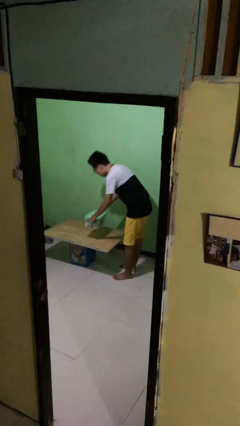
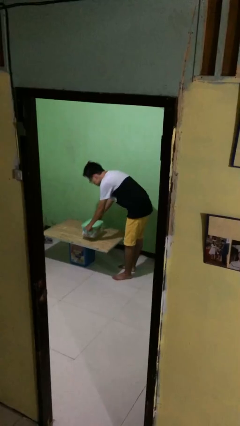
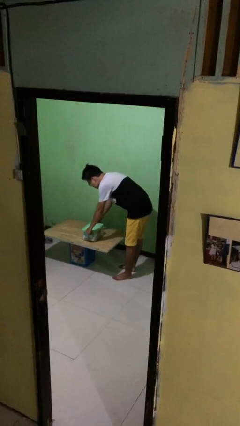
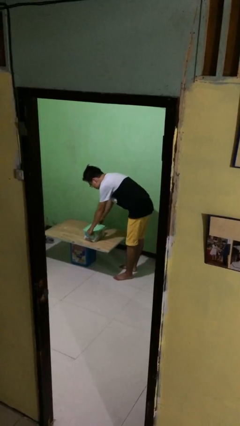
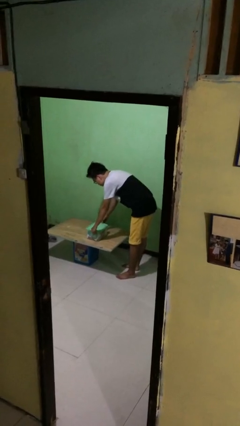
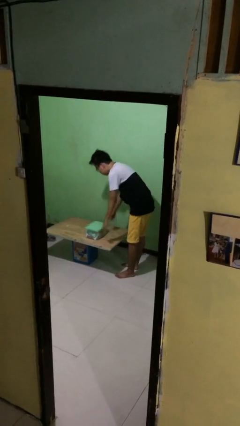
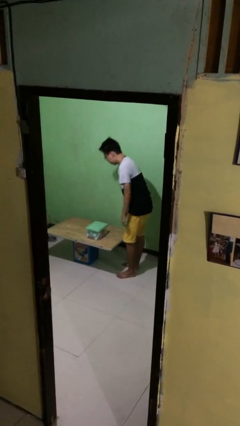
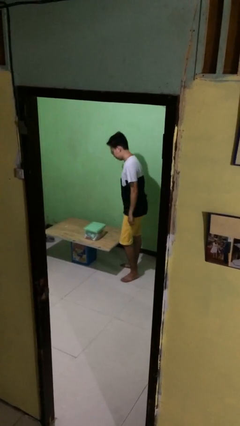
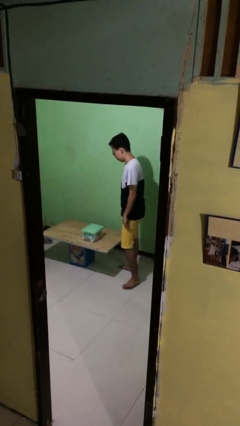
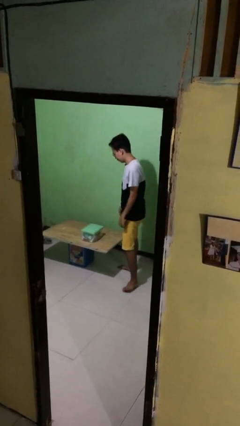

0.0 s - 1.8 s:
person puts down object on table

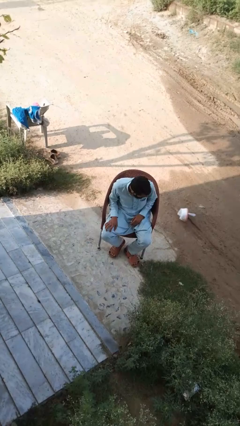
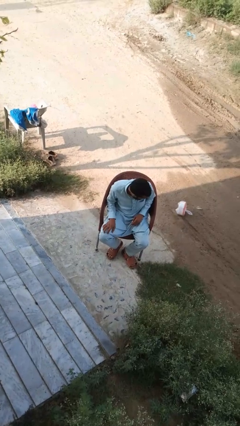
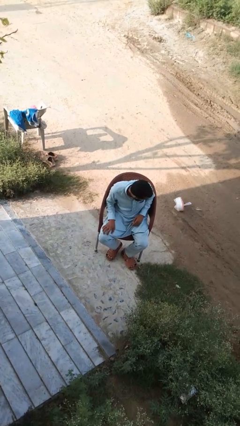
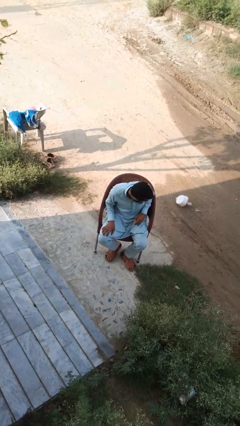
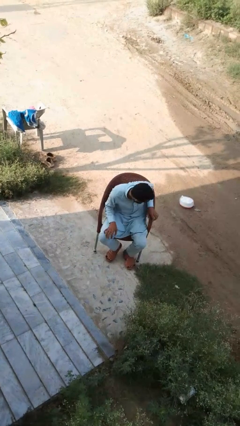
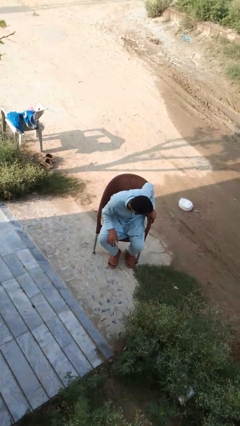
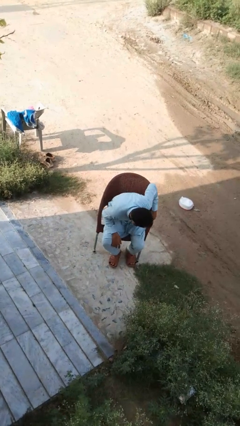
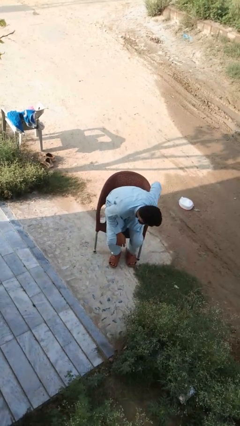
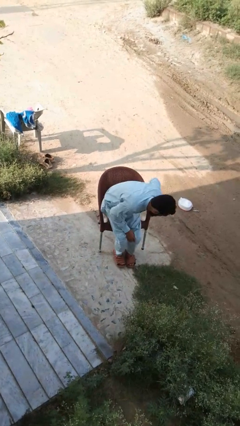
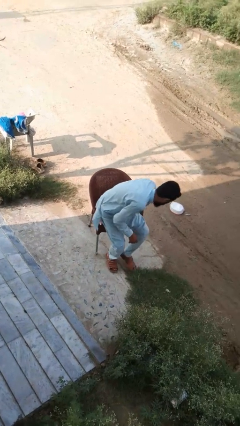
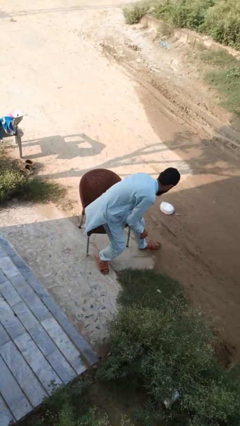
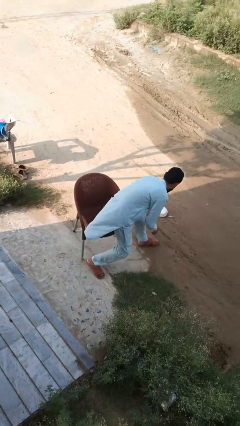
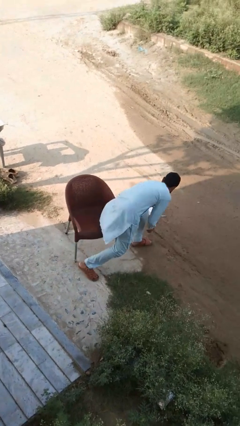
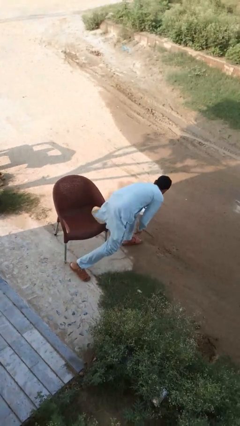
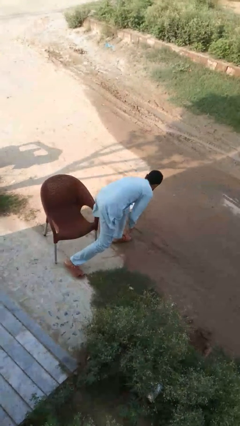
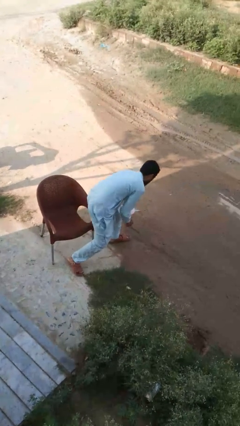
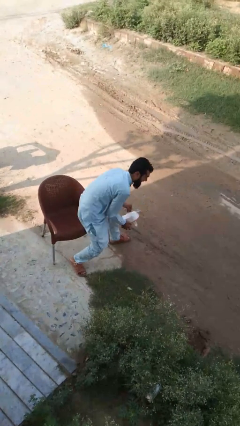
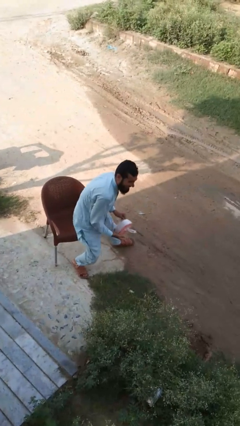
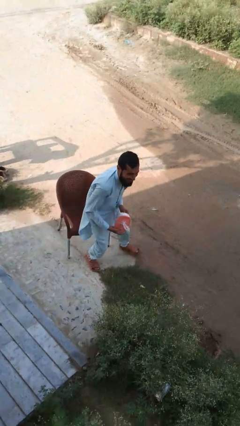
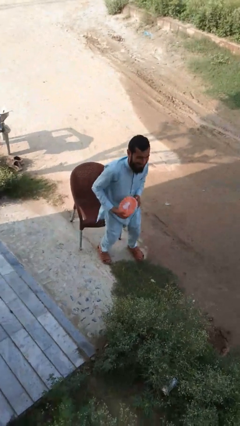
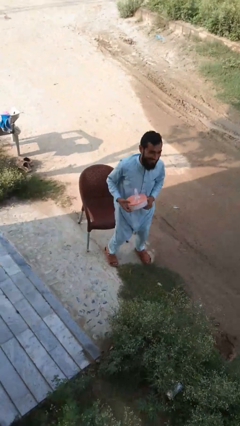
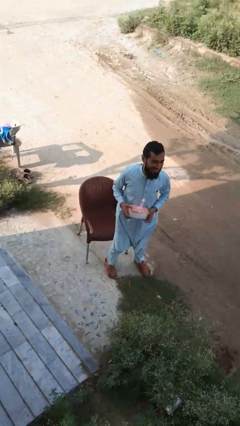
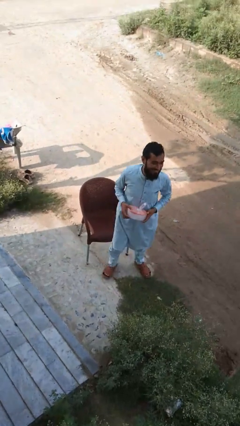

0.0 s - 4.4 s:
person picks up object from floor

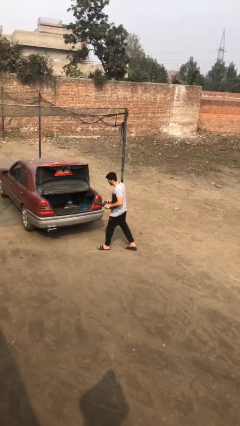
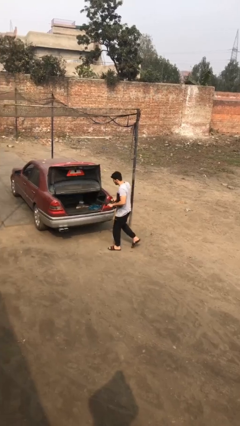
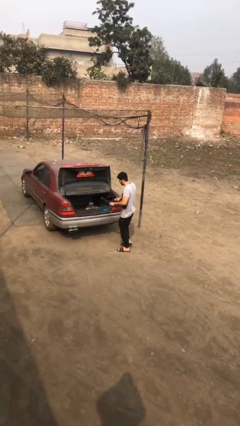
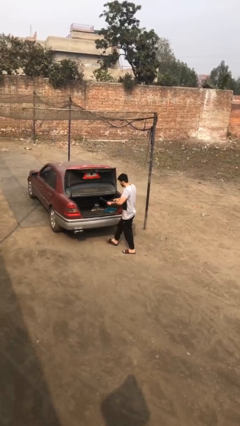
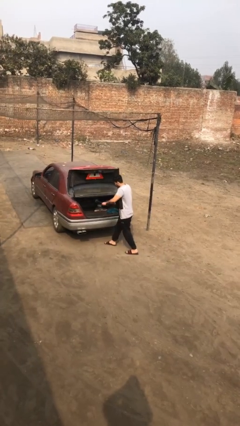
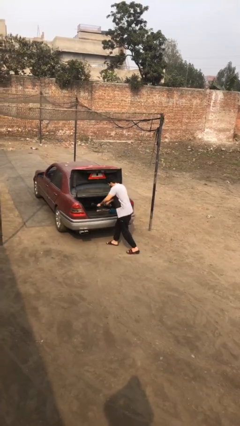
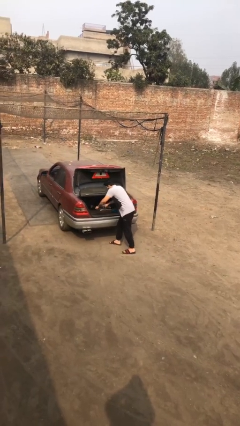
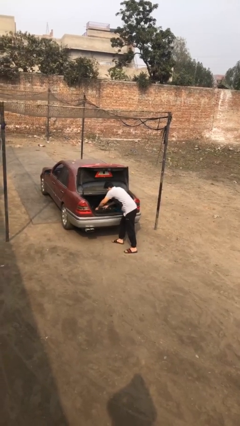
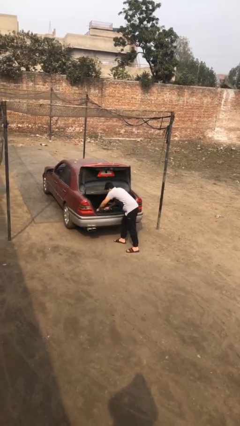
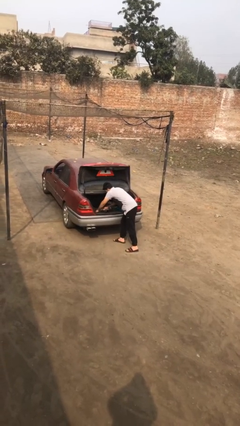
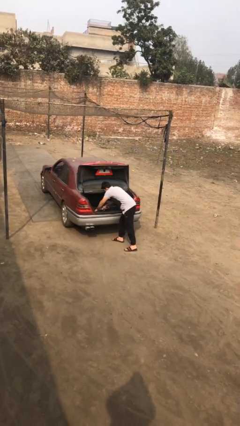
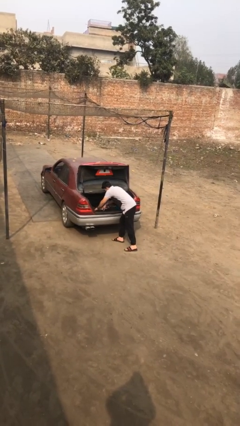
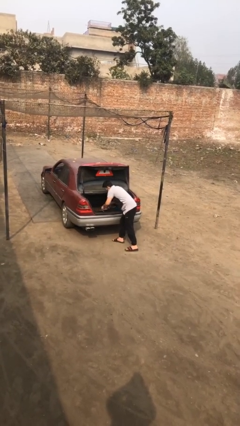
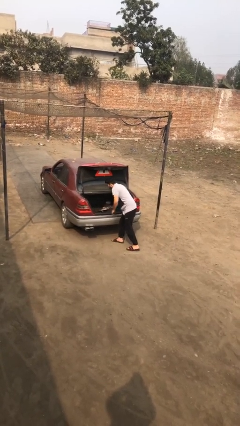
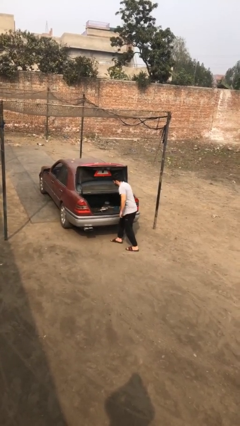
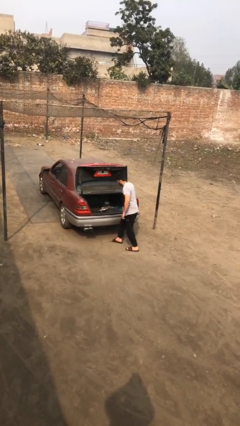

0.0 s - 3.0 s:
person loads car

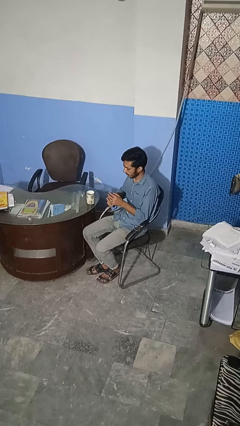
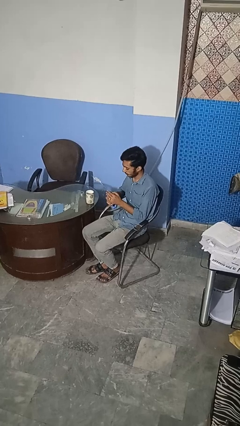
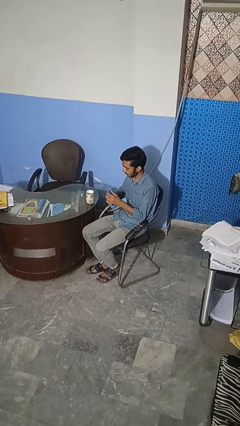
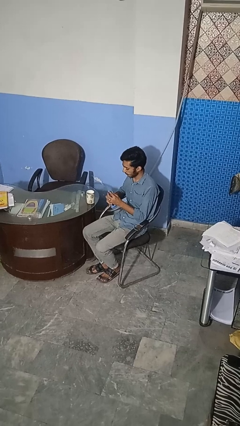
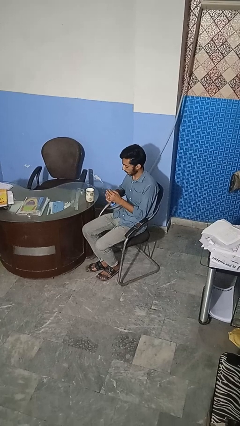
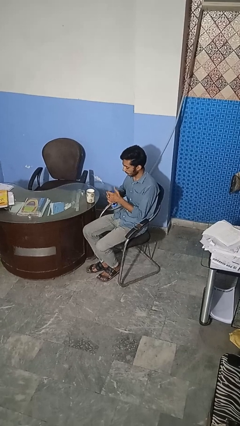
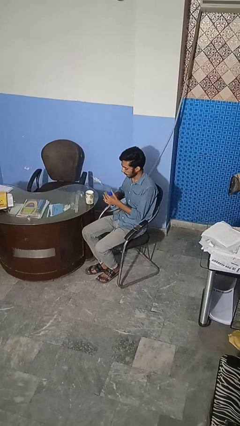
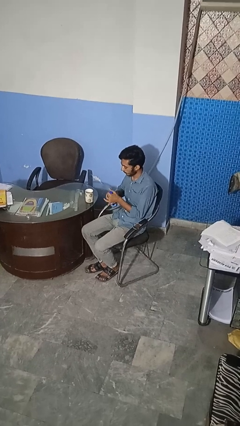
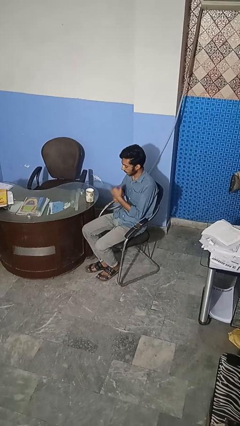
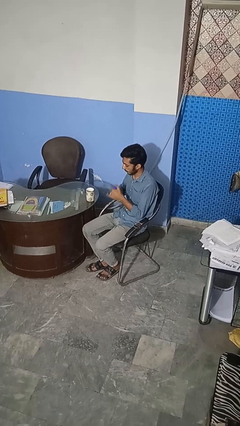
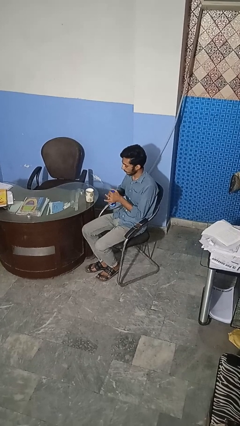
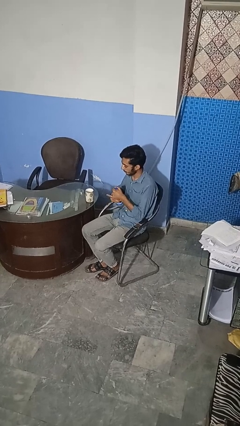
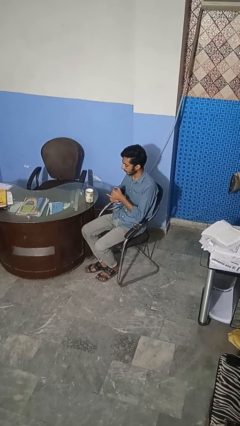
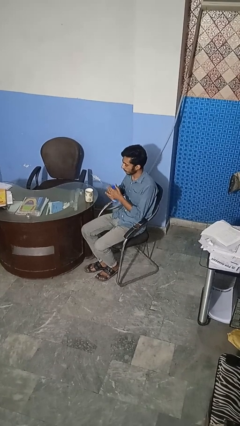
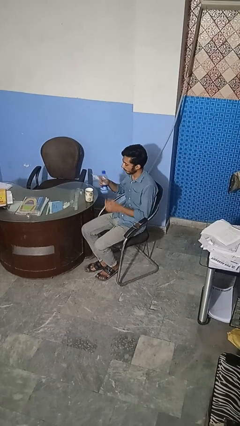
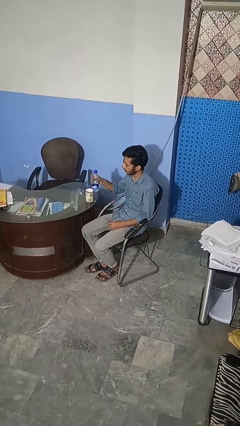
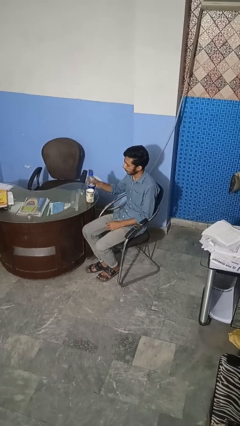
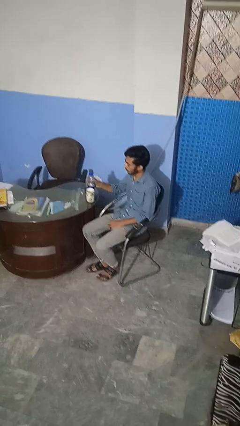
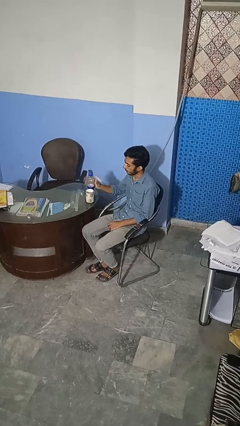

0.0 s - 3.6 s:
person screws lid to bottle

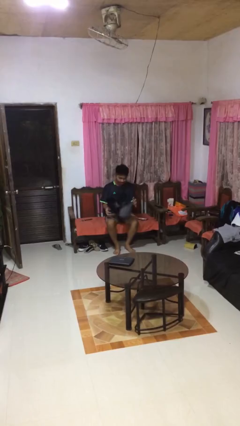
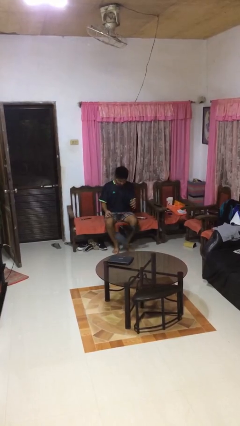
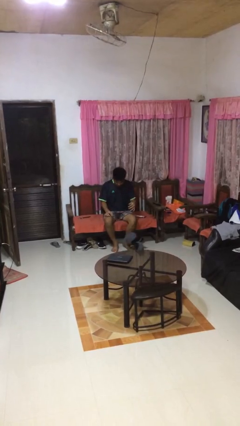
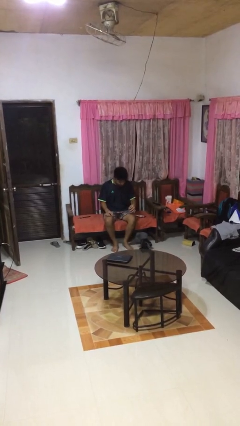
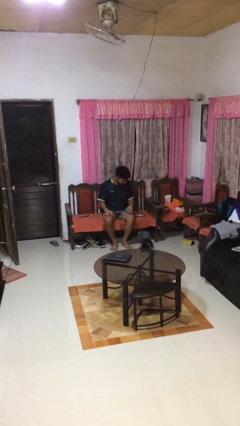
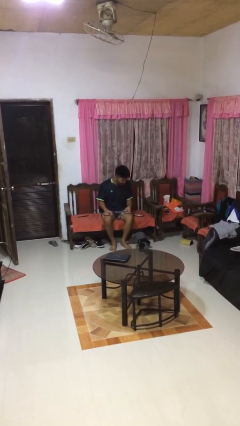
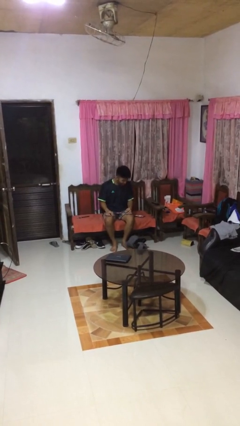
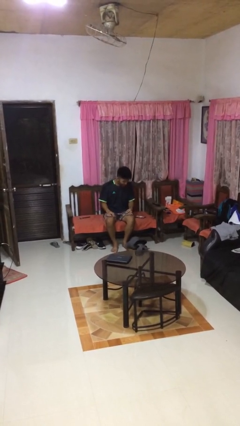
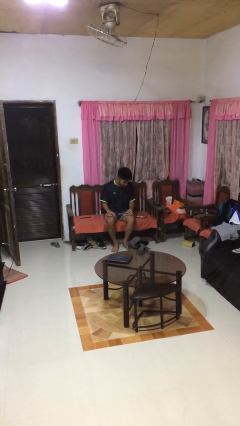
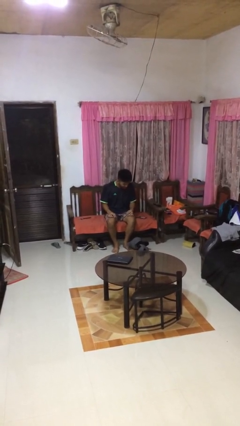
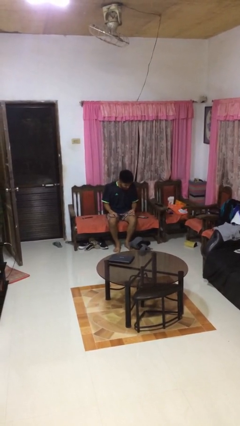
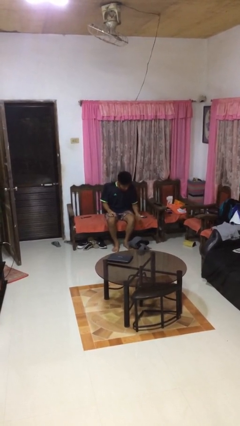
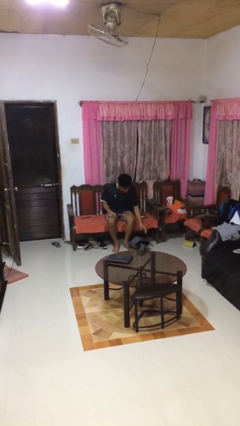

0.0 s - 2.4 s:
person drops object

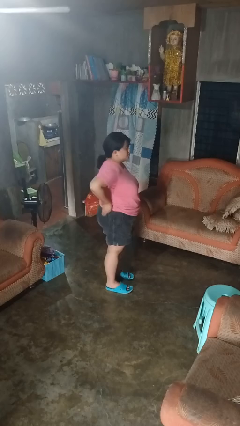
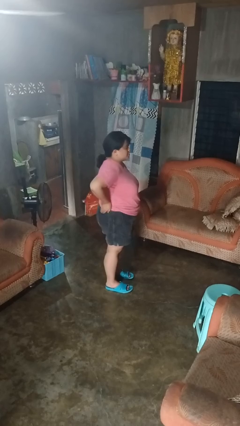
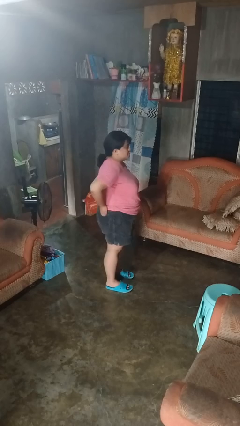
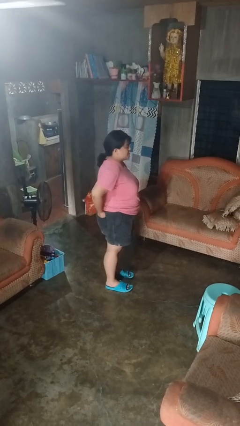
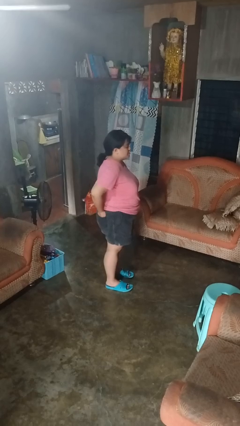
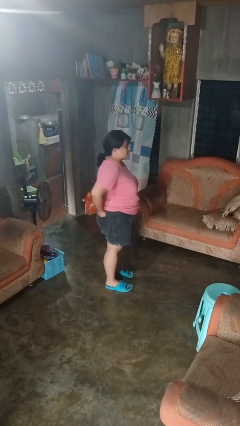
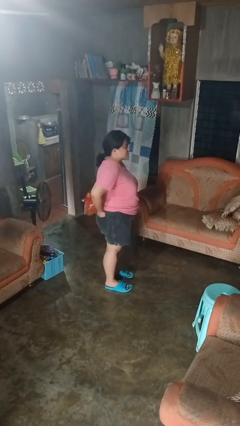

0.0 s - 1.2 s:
person puts hands in back pockets

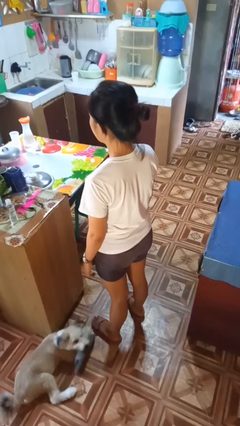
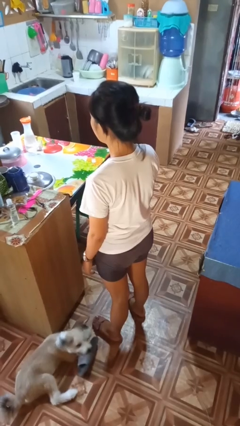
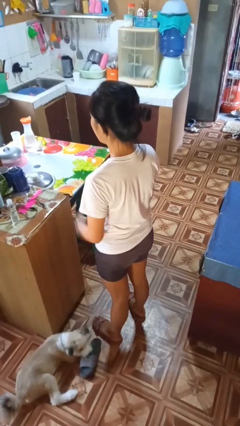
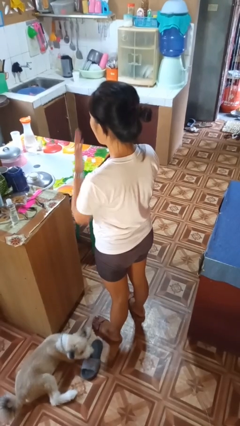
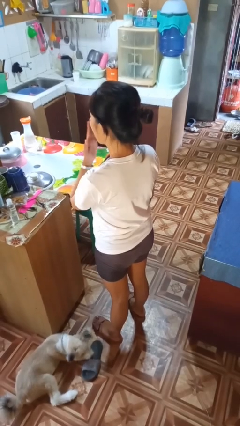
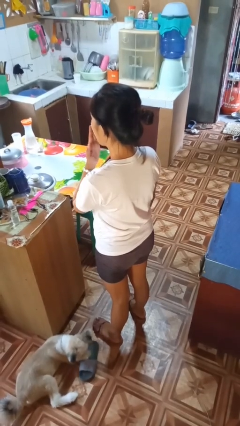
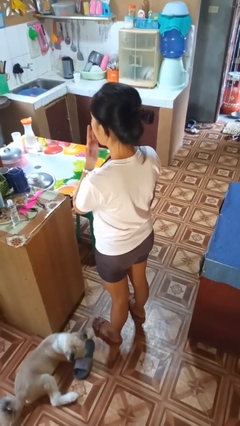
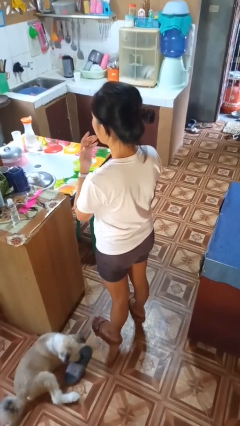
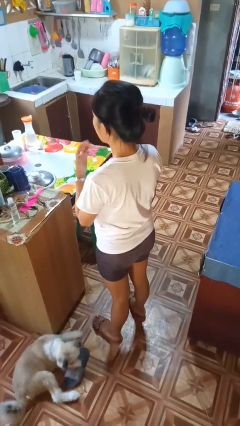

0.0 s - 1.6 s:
person licks fingers
